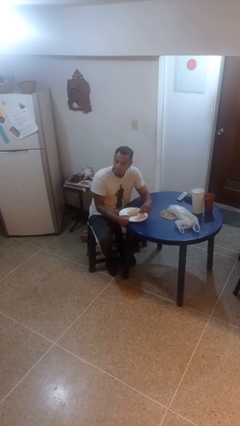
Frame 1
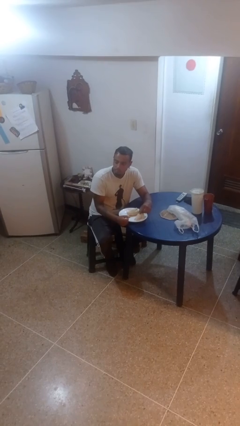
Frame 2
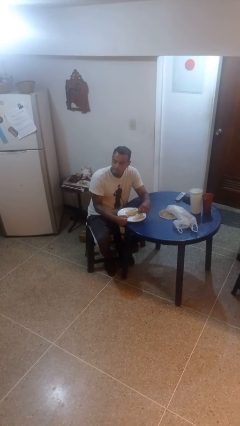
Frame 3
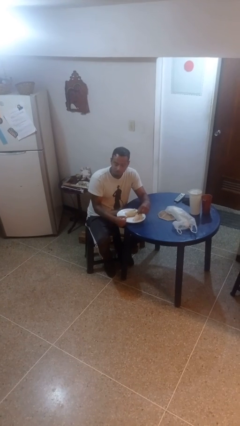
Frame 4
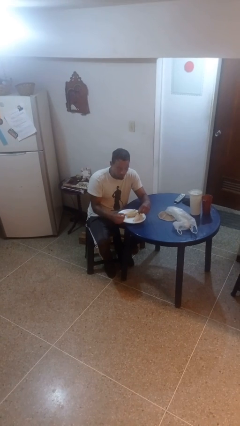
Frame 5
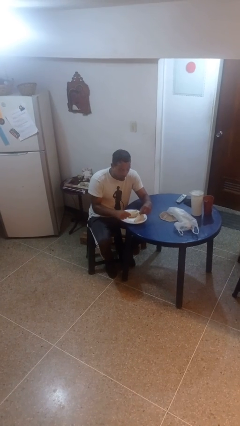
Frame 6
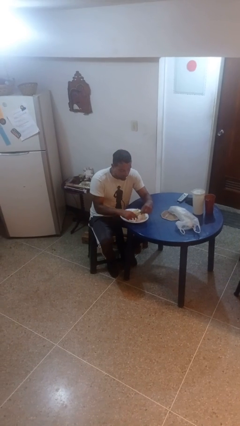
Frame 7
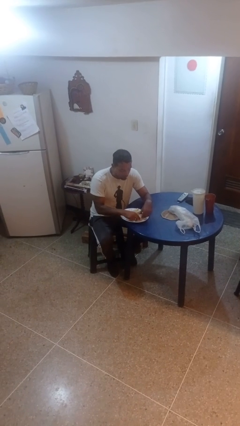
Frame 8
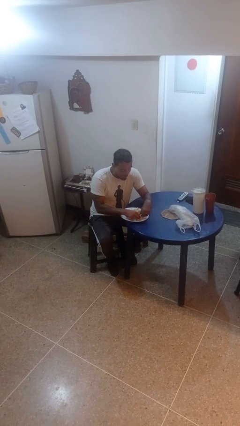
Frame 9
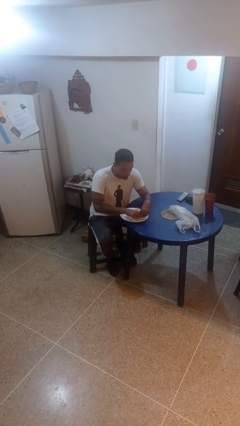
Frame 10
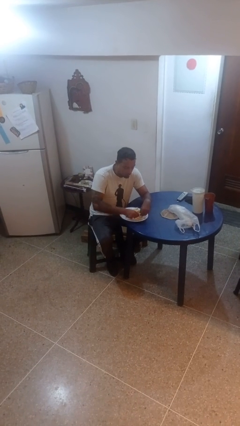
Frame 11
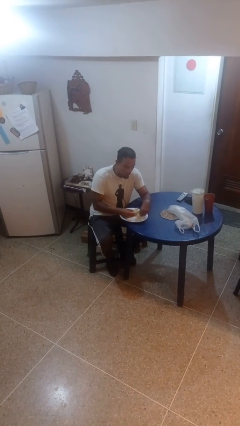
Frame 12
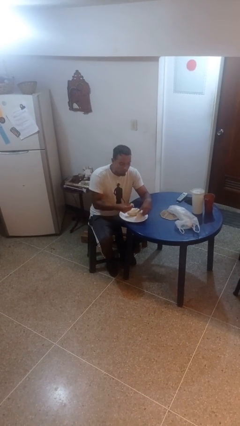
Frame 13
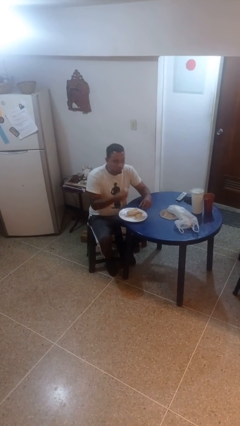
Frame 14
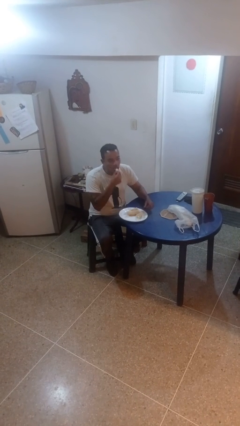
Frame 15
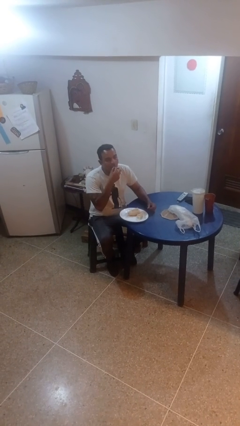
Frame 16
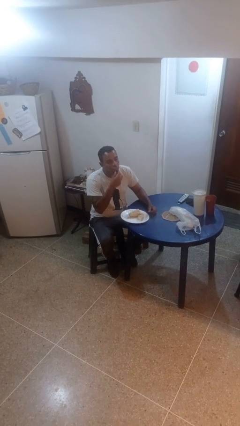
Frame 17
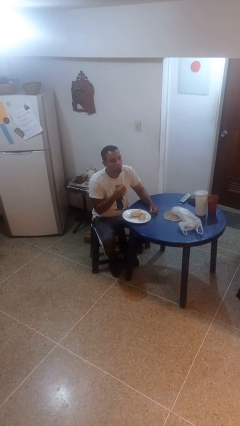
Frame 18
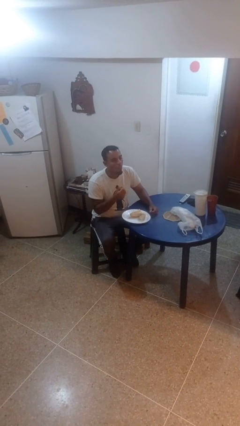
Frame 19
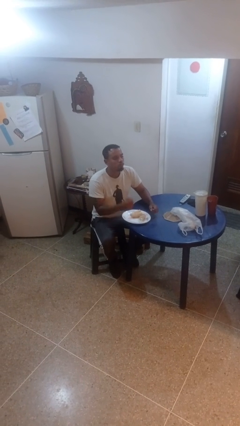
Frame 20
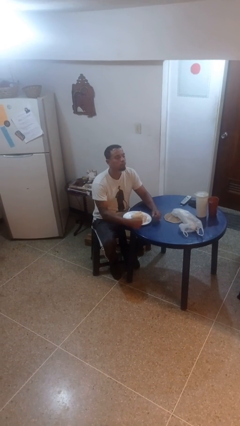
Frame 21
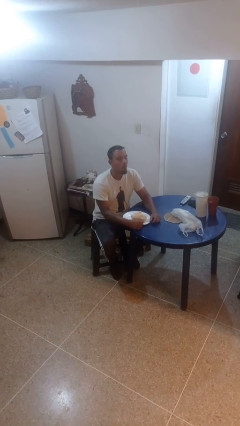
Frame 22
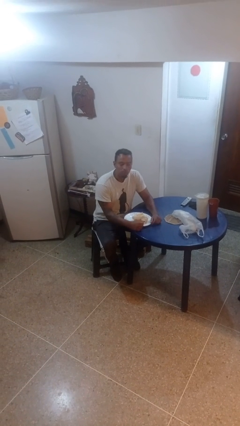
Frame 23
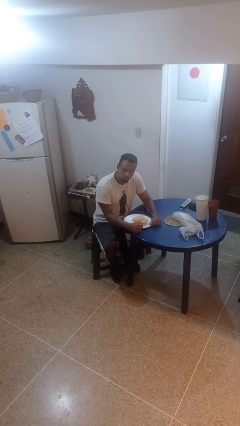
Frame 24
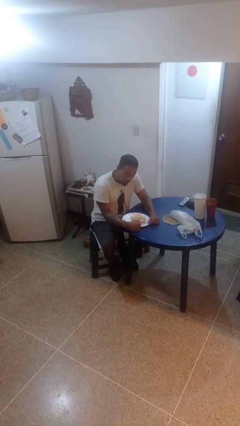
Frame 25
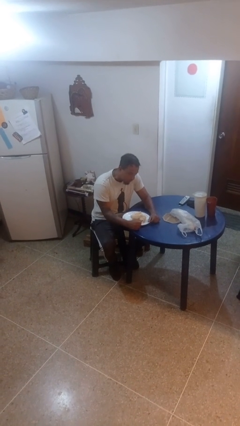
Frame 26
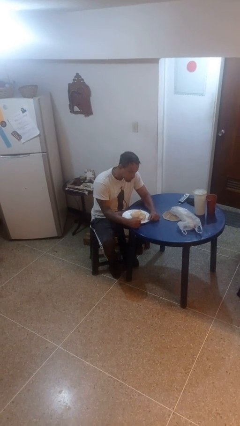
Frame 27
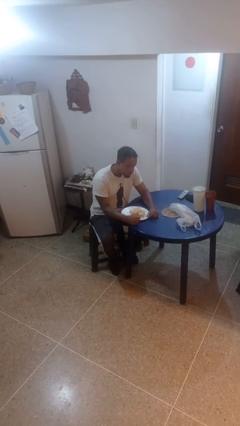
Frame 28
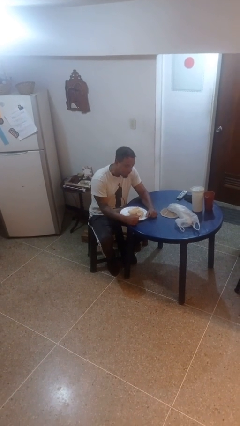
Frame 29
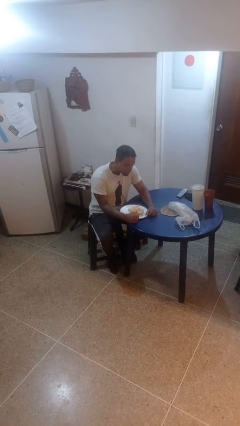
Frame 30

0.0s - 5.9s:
person eats with hands

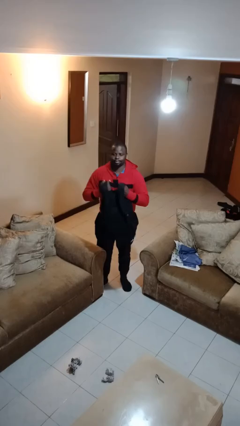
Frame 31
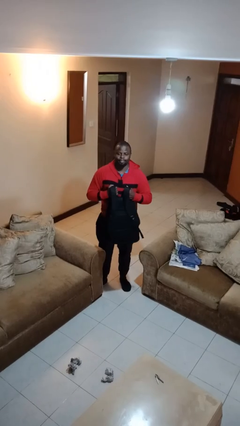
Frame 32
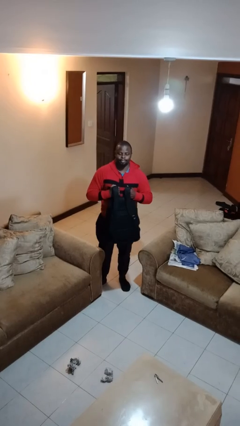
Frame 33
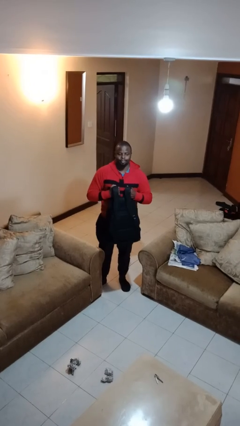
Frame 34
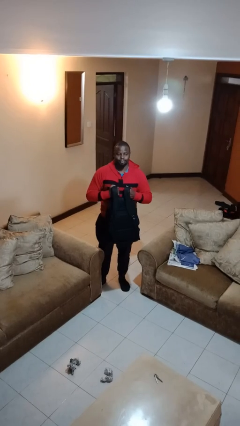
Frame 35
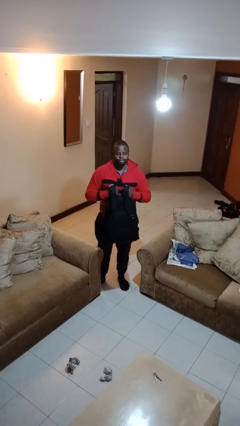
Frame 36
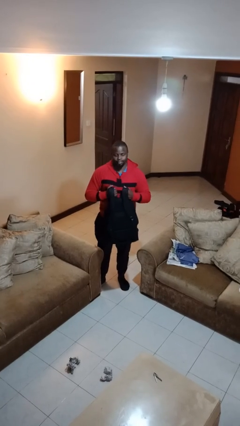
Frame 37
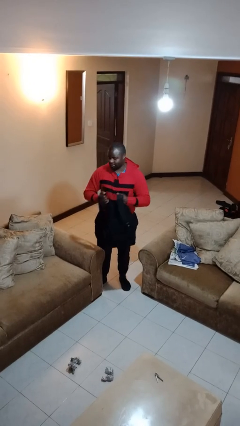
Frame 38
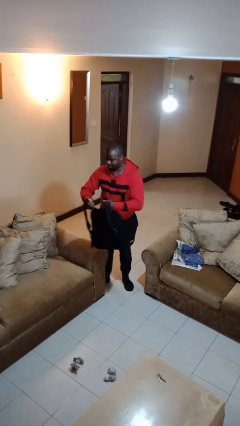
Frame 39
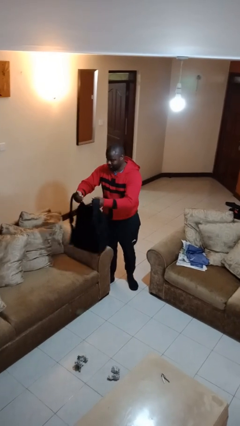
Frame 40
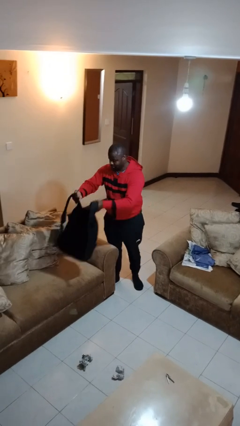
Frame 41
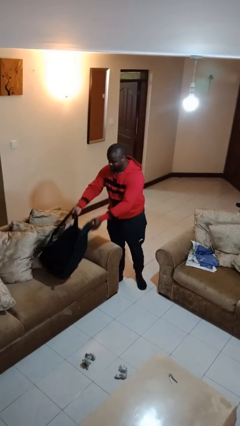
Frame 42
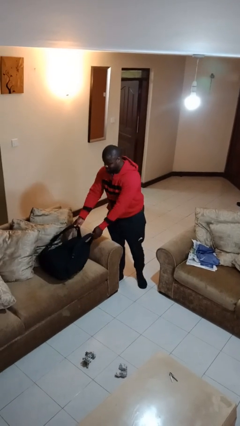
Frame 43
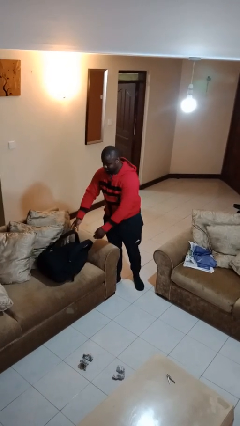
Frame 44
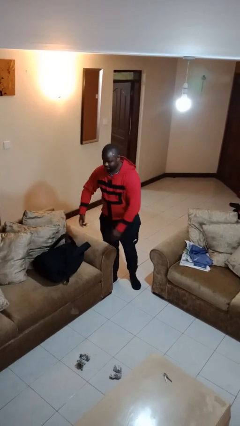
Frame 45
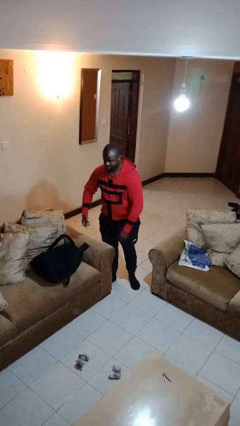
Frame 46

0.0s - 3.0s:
person puts down object on couch

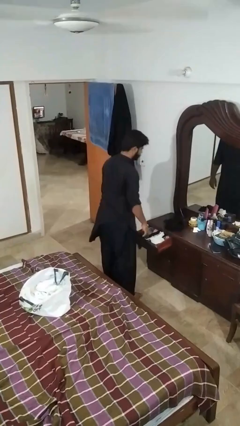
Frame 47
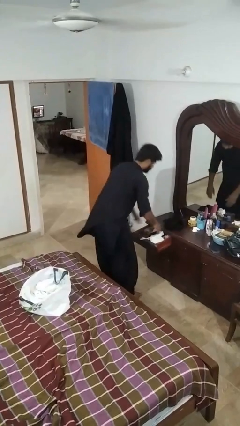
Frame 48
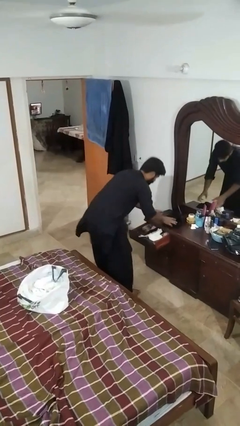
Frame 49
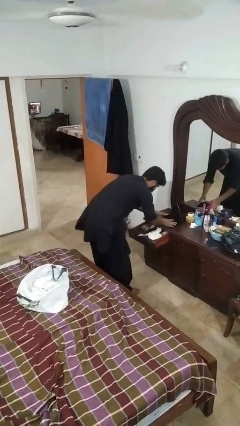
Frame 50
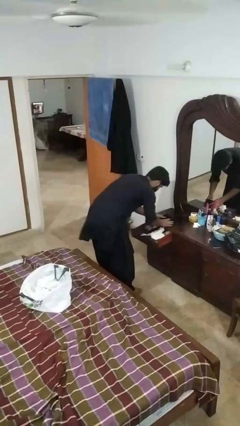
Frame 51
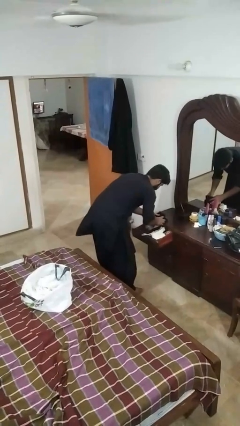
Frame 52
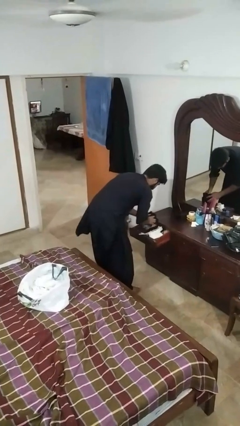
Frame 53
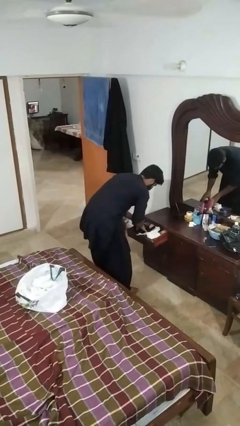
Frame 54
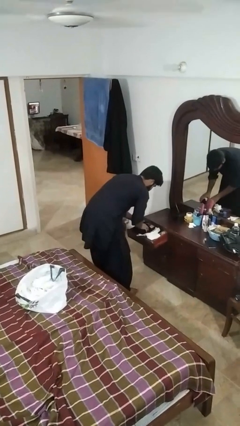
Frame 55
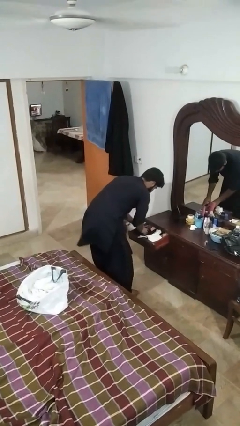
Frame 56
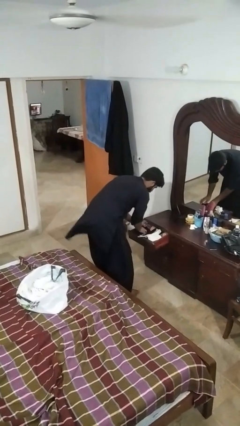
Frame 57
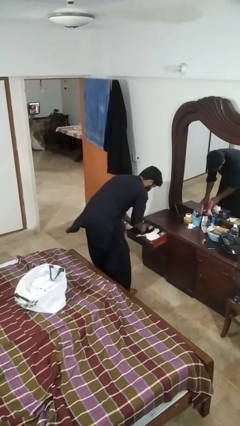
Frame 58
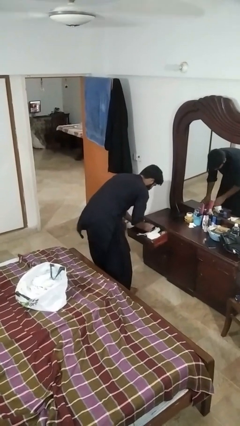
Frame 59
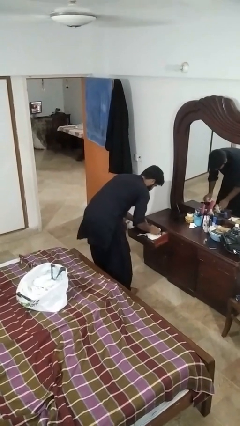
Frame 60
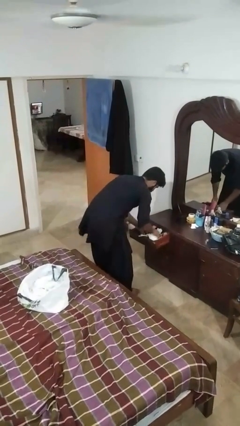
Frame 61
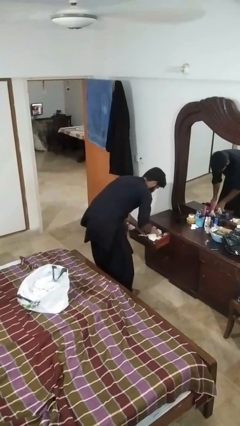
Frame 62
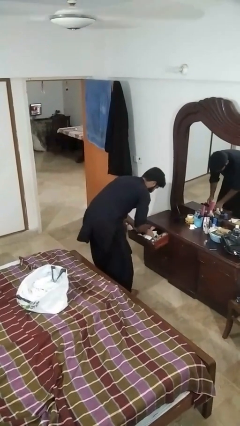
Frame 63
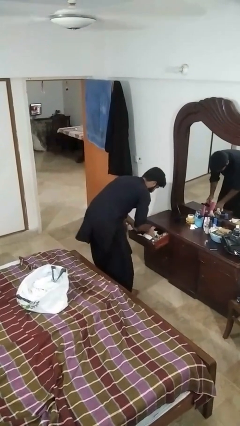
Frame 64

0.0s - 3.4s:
person puts clothes into dresser

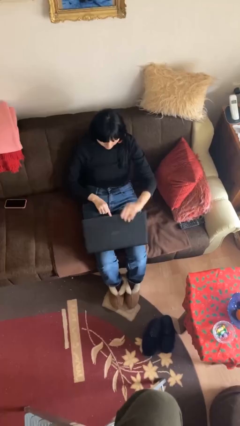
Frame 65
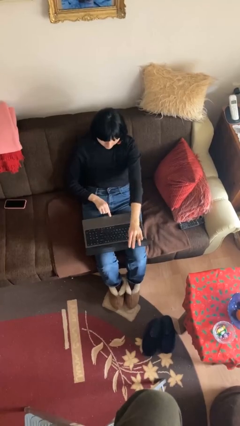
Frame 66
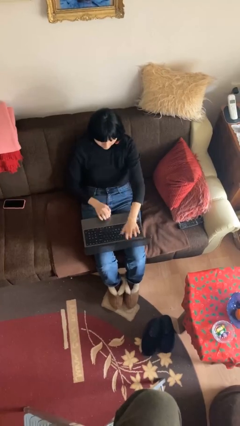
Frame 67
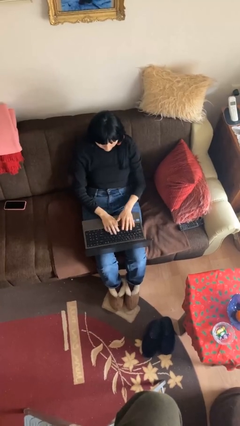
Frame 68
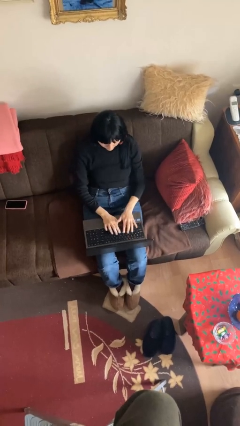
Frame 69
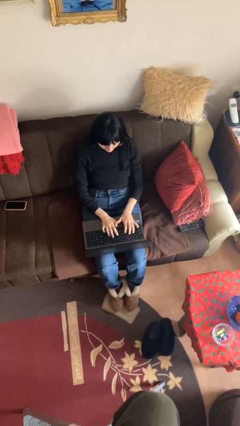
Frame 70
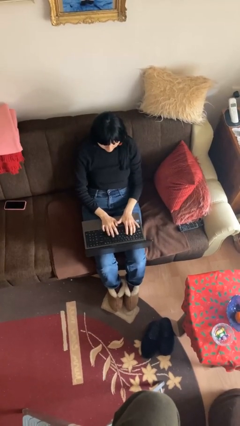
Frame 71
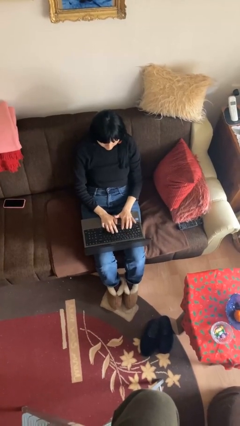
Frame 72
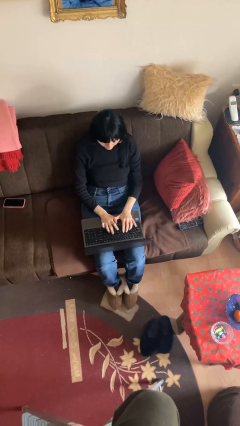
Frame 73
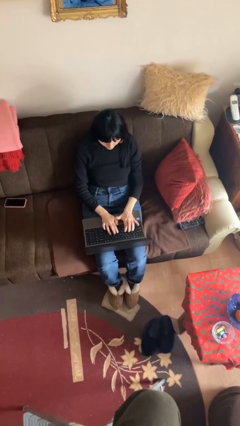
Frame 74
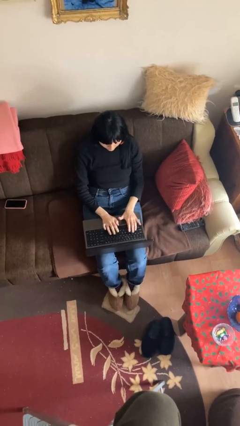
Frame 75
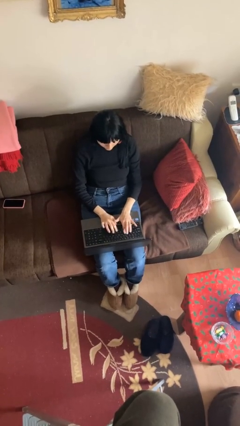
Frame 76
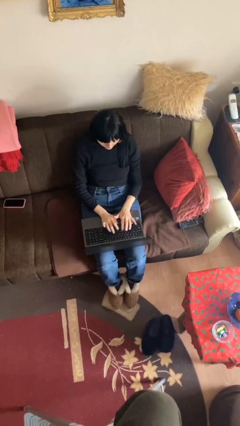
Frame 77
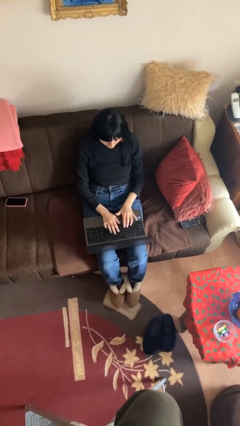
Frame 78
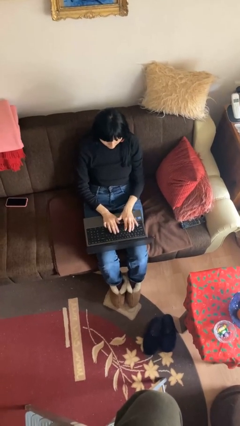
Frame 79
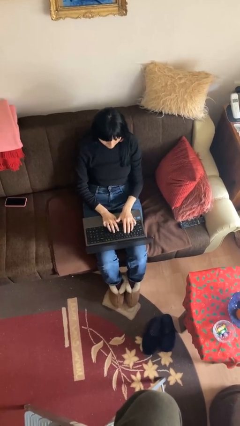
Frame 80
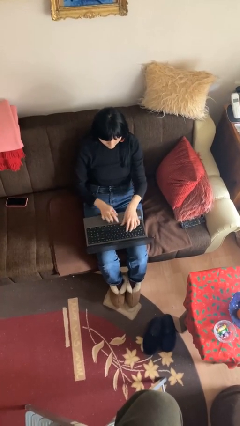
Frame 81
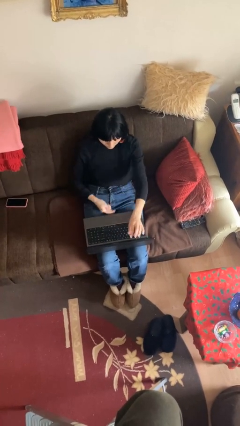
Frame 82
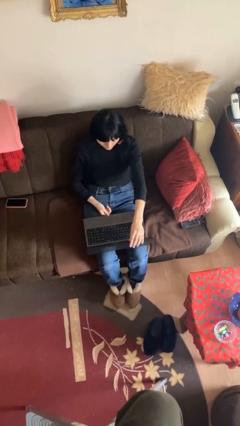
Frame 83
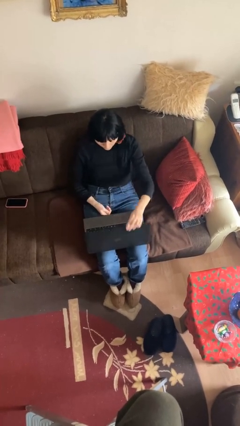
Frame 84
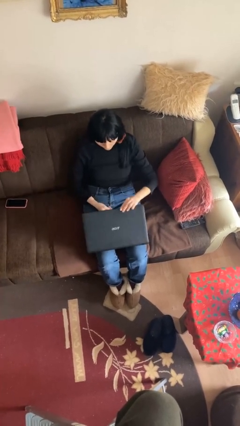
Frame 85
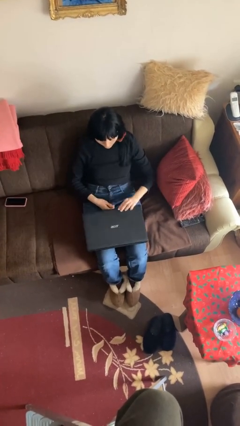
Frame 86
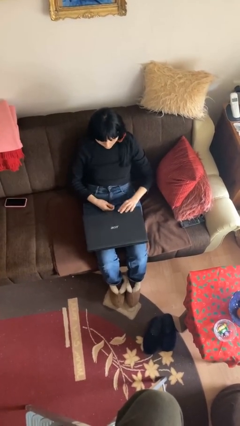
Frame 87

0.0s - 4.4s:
person interacts with laptop

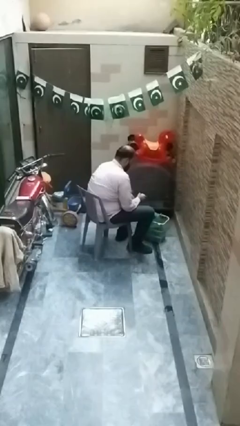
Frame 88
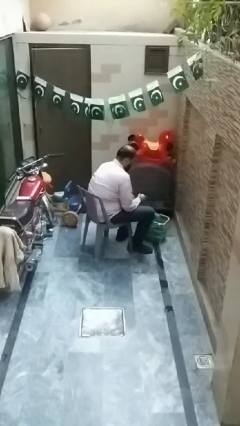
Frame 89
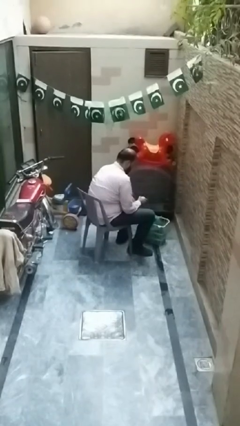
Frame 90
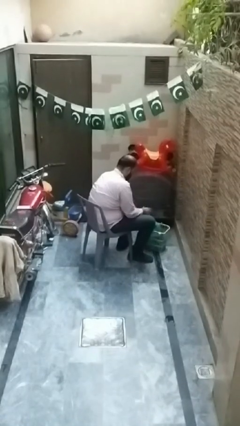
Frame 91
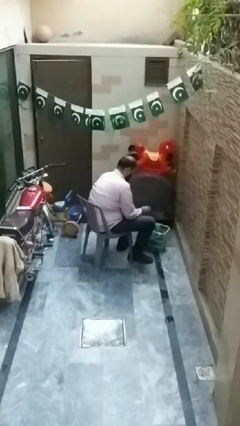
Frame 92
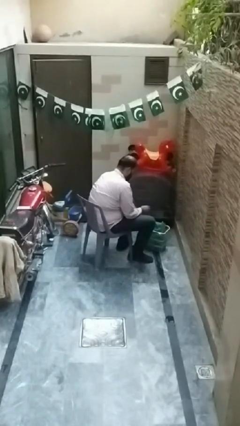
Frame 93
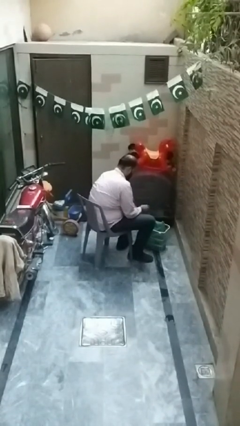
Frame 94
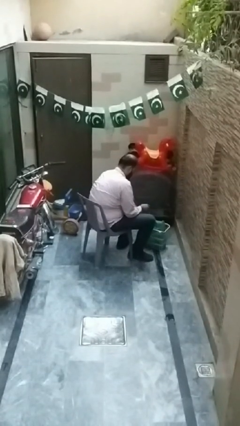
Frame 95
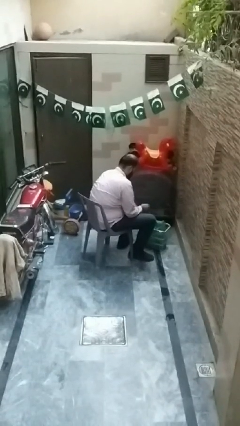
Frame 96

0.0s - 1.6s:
person puts object into basket
